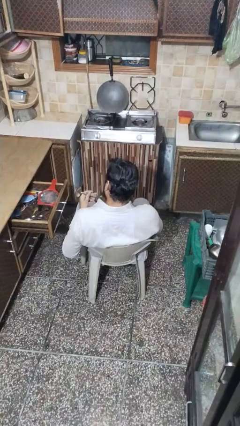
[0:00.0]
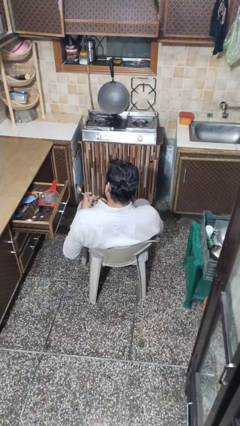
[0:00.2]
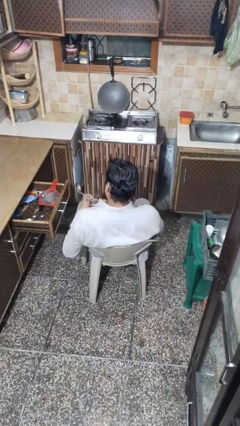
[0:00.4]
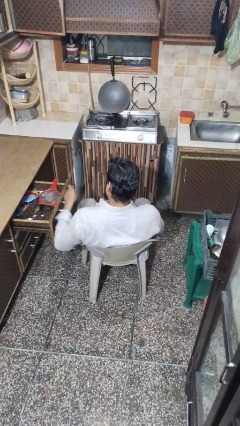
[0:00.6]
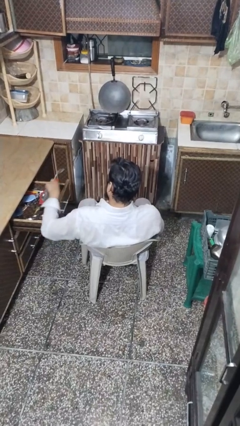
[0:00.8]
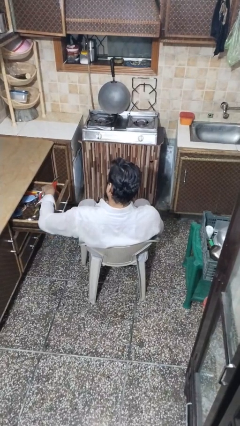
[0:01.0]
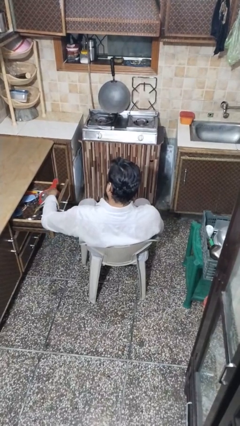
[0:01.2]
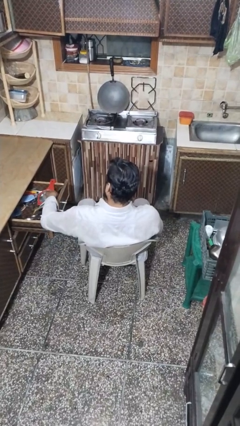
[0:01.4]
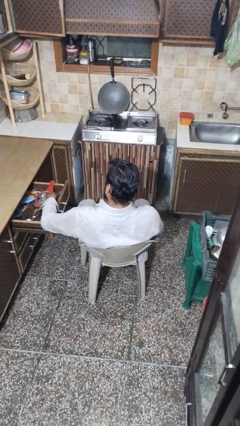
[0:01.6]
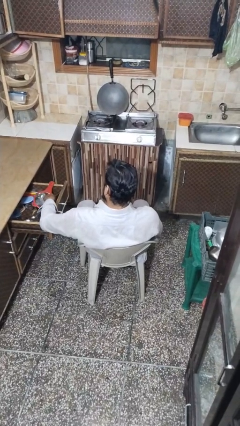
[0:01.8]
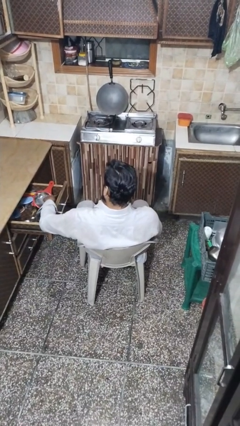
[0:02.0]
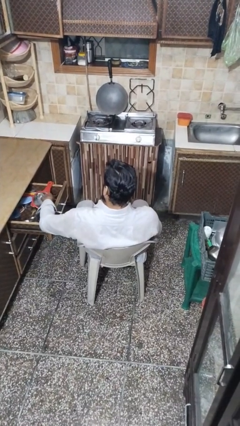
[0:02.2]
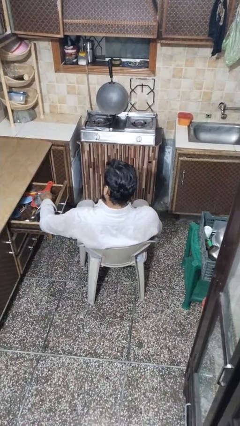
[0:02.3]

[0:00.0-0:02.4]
person puts object into kitchen drawer

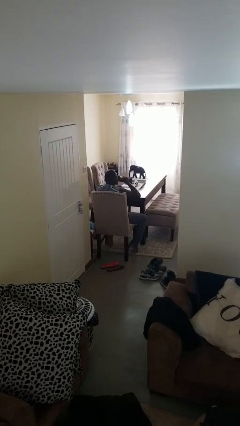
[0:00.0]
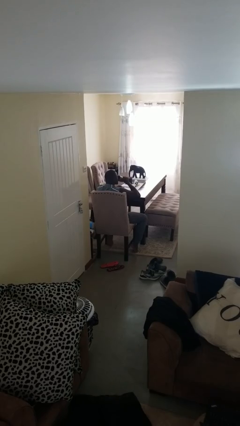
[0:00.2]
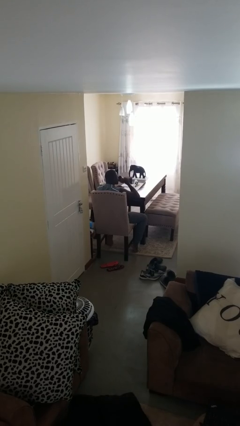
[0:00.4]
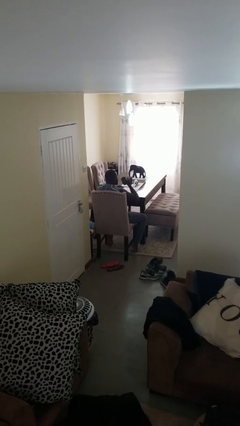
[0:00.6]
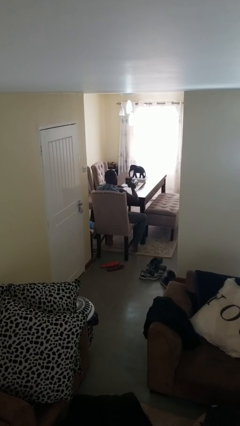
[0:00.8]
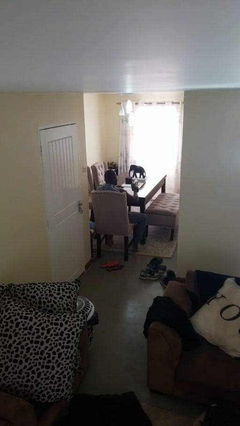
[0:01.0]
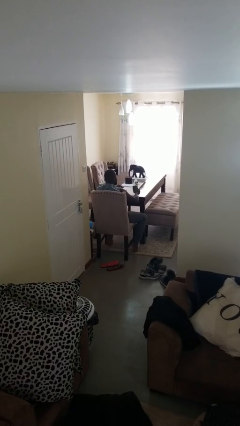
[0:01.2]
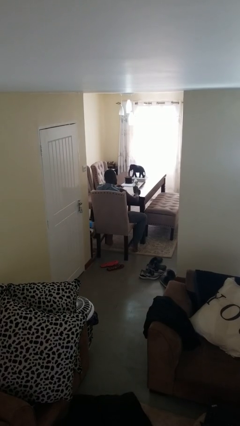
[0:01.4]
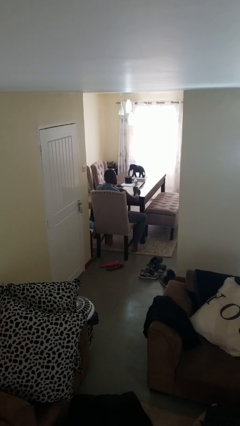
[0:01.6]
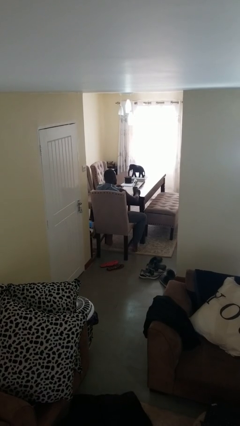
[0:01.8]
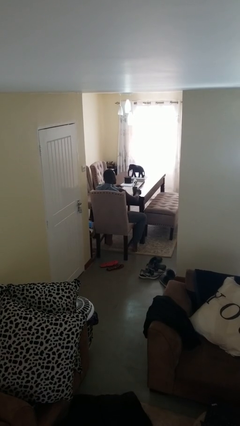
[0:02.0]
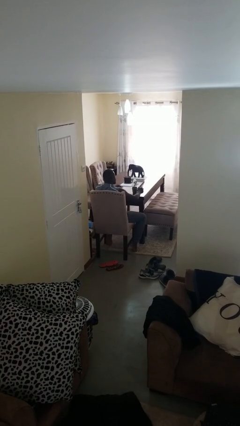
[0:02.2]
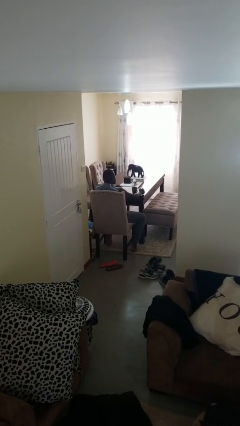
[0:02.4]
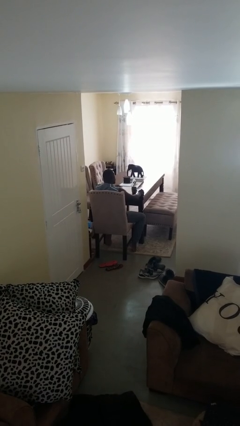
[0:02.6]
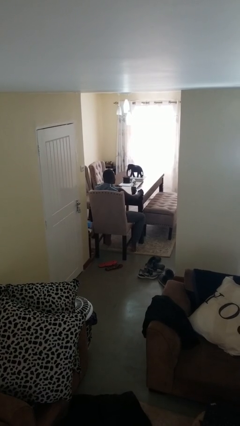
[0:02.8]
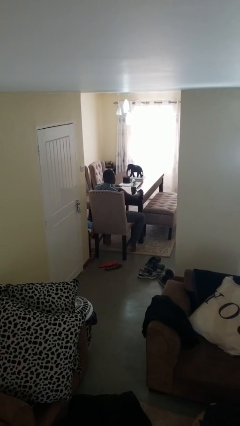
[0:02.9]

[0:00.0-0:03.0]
person puts down object on table

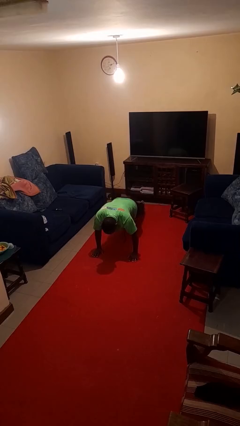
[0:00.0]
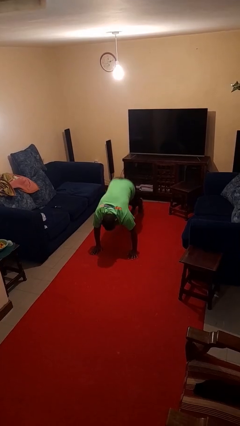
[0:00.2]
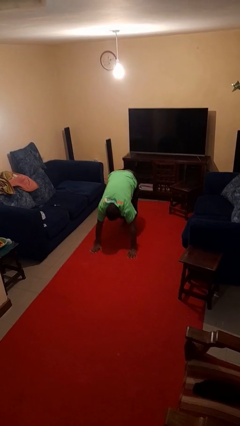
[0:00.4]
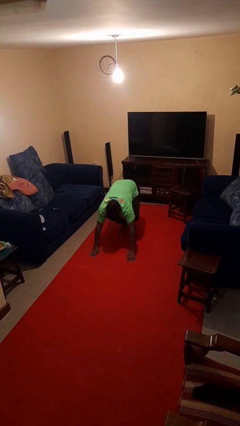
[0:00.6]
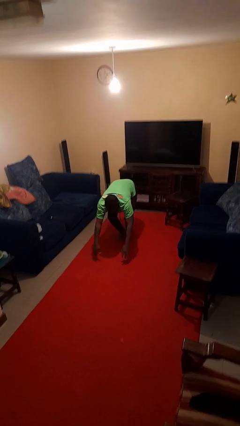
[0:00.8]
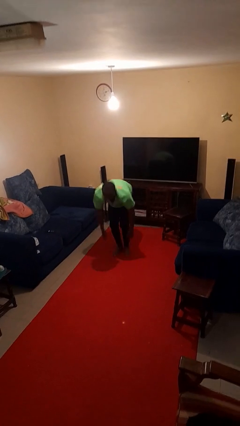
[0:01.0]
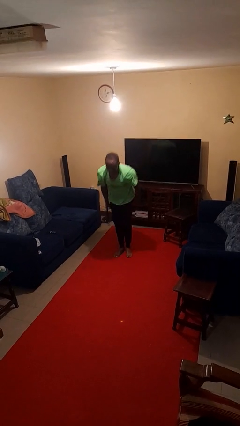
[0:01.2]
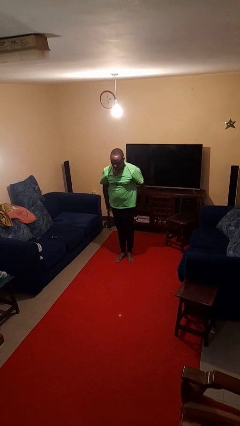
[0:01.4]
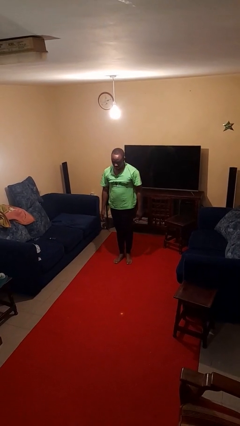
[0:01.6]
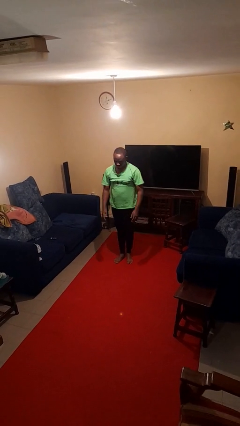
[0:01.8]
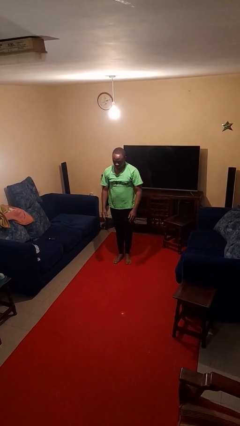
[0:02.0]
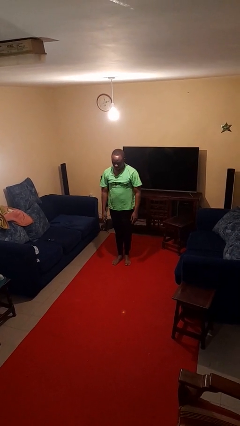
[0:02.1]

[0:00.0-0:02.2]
person stands up from floor

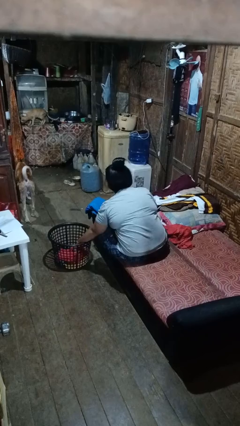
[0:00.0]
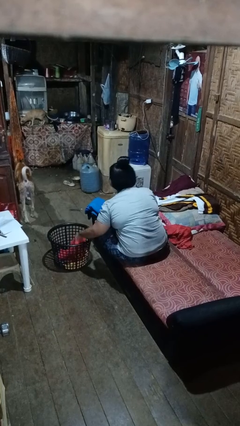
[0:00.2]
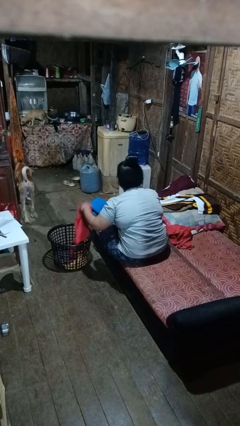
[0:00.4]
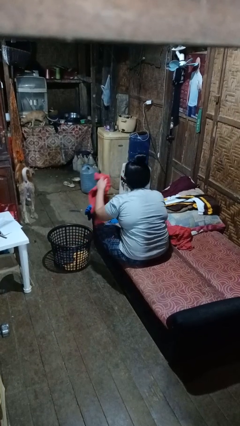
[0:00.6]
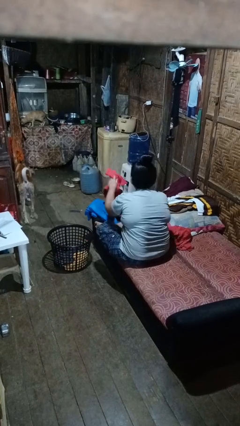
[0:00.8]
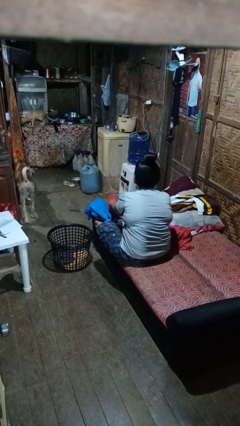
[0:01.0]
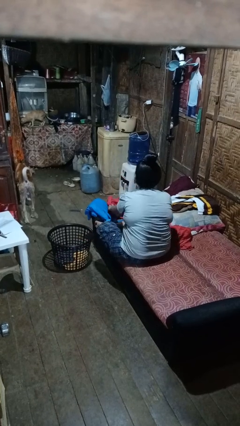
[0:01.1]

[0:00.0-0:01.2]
person takes object from basket

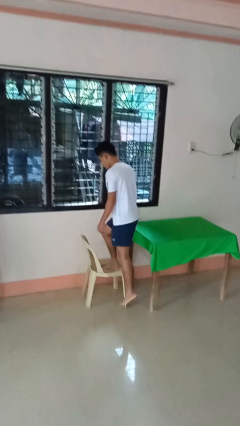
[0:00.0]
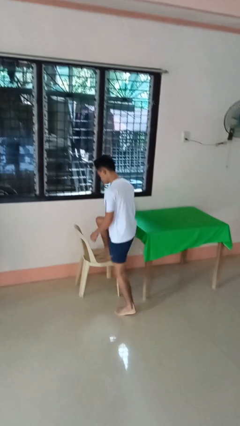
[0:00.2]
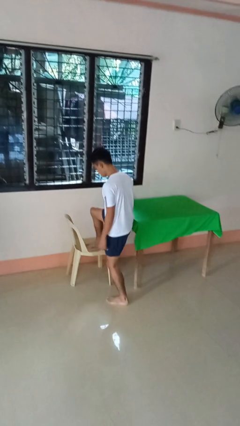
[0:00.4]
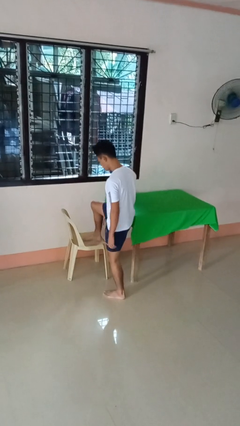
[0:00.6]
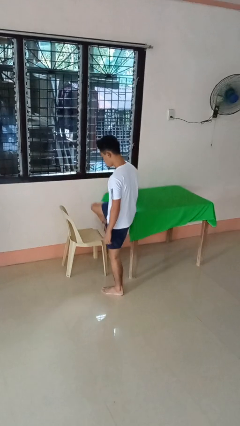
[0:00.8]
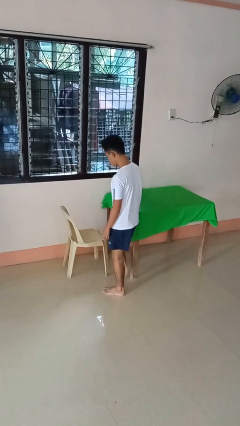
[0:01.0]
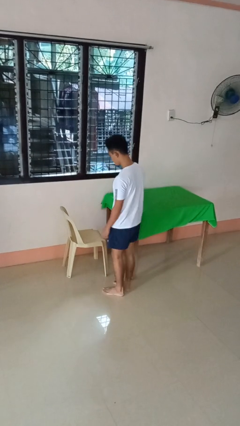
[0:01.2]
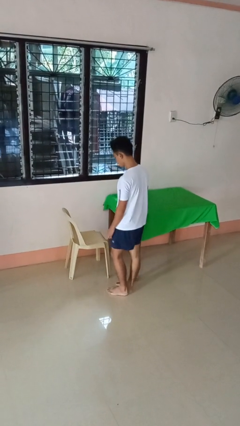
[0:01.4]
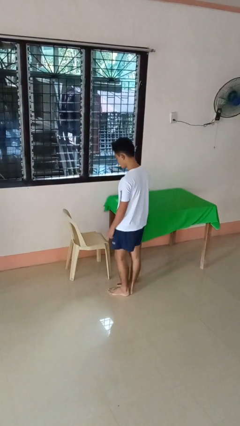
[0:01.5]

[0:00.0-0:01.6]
person climbs off chair

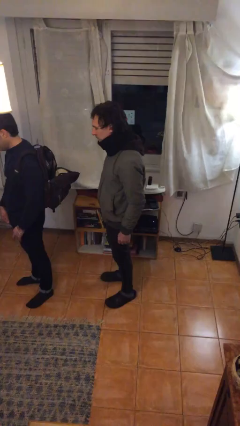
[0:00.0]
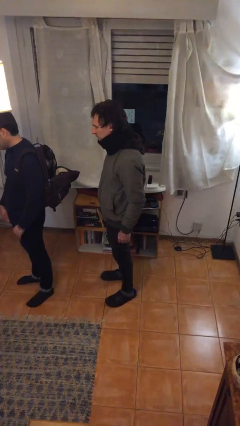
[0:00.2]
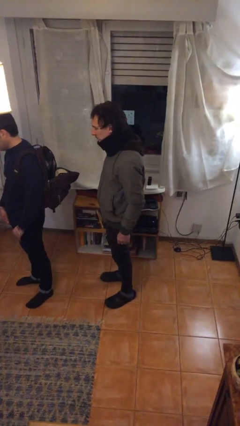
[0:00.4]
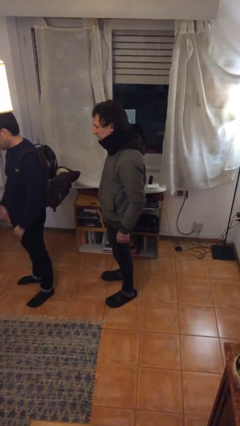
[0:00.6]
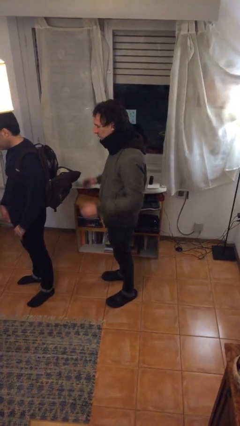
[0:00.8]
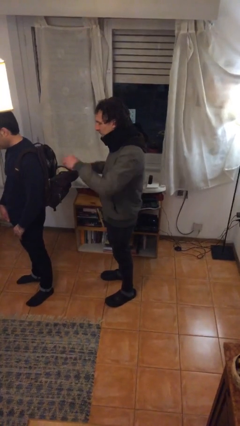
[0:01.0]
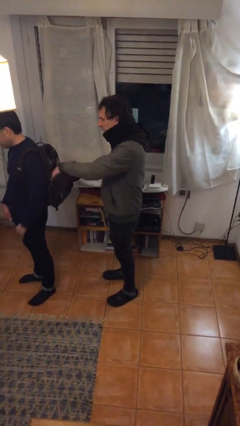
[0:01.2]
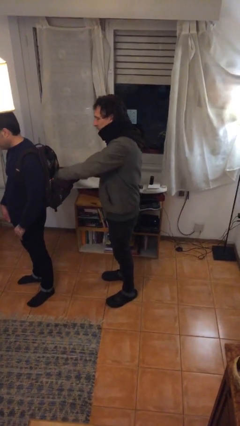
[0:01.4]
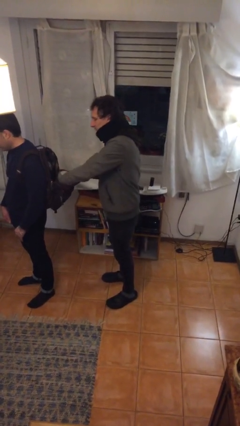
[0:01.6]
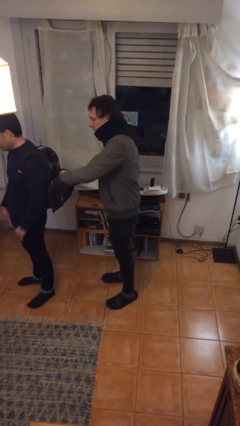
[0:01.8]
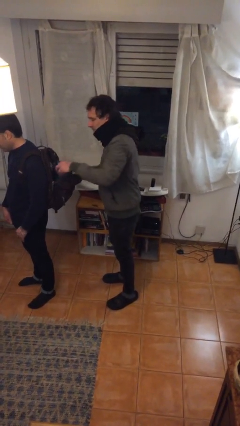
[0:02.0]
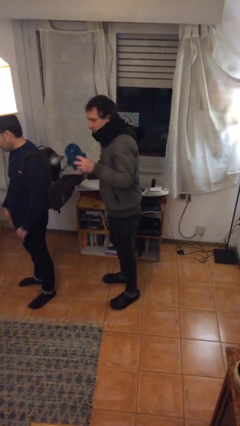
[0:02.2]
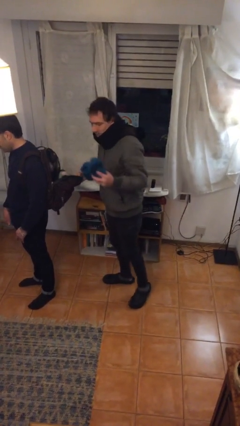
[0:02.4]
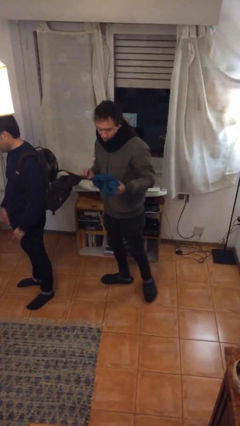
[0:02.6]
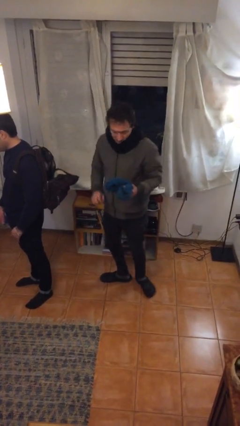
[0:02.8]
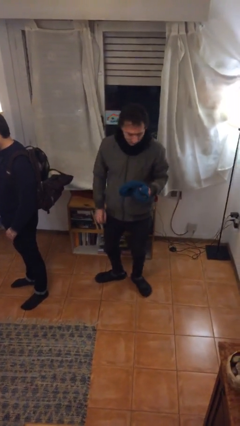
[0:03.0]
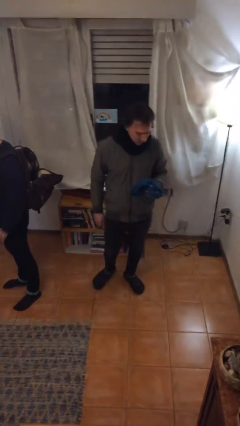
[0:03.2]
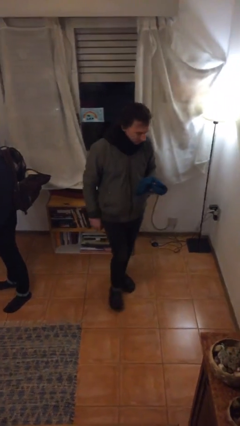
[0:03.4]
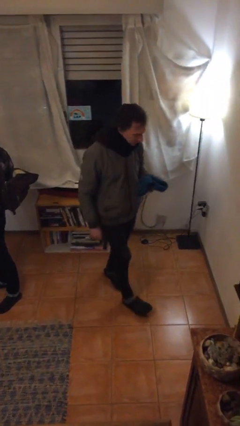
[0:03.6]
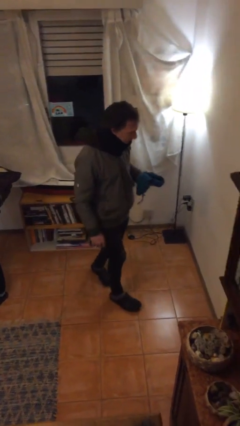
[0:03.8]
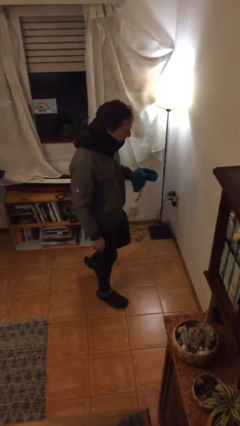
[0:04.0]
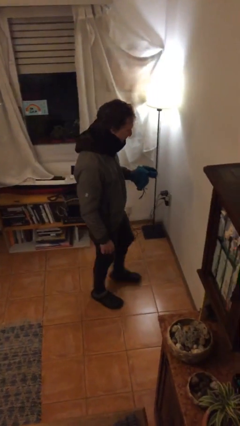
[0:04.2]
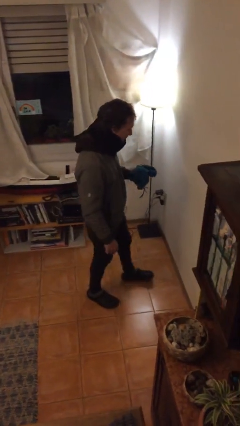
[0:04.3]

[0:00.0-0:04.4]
person steals object from person

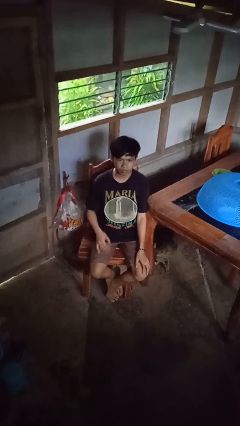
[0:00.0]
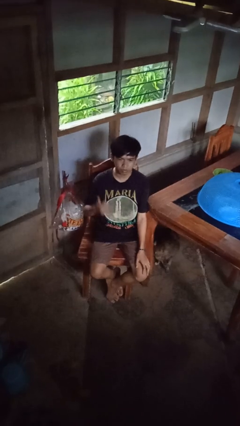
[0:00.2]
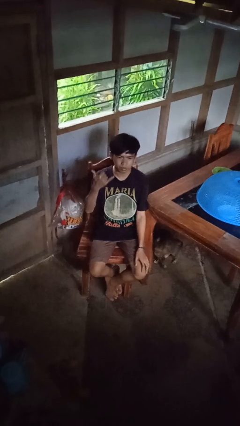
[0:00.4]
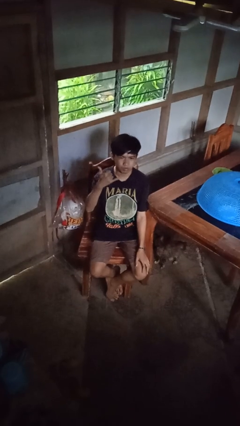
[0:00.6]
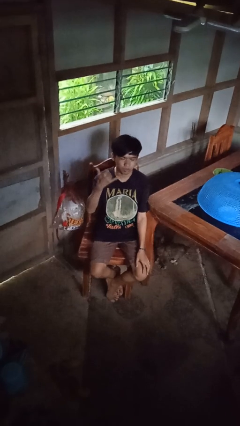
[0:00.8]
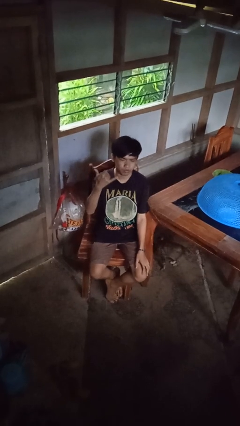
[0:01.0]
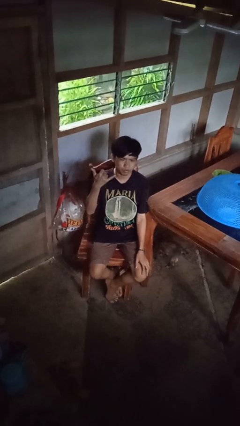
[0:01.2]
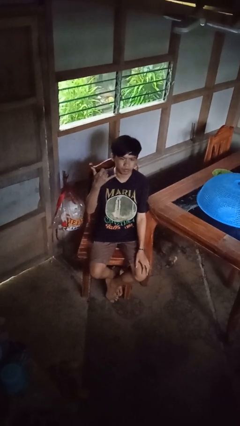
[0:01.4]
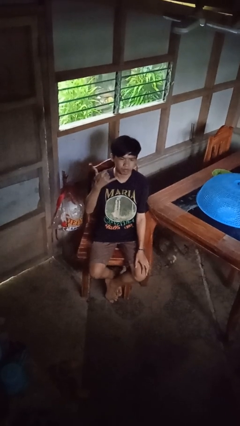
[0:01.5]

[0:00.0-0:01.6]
person gestures hang loose

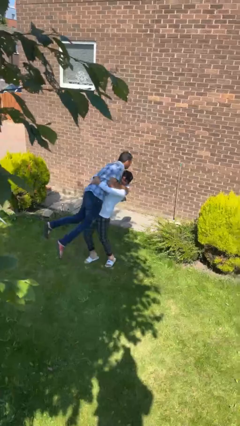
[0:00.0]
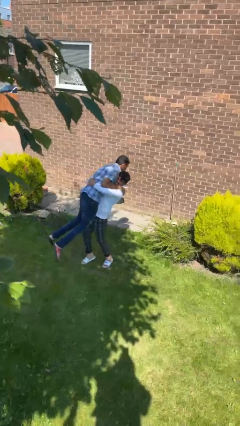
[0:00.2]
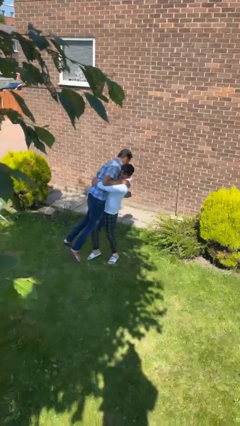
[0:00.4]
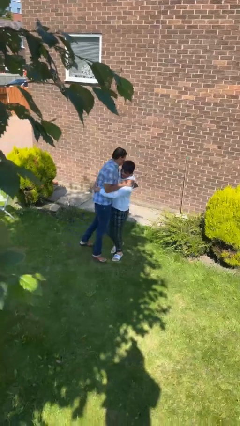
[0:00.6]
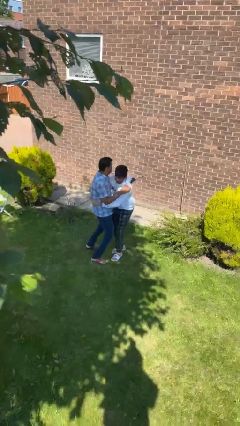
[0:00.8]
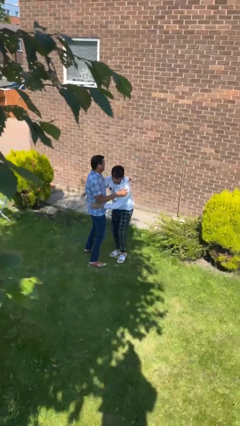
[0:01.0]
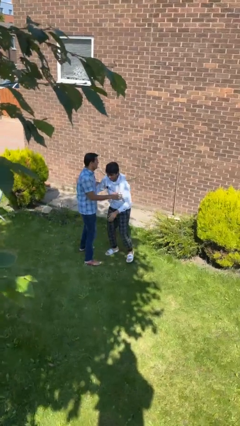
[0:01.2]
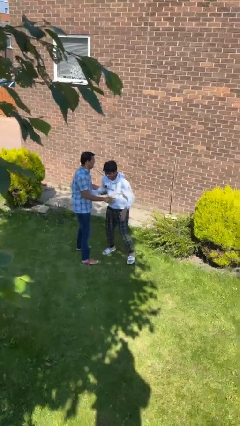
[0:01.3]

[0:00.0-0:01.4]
person puts down person
